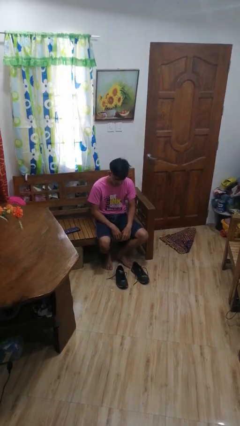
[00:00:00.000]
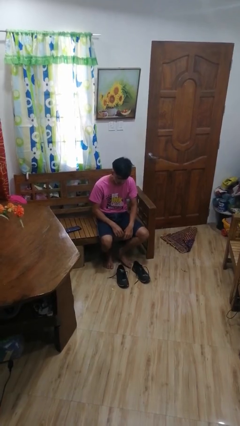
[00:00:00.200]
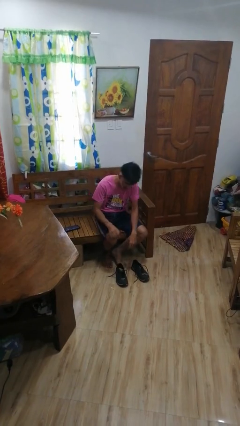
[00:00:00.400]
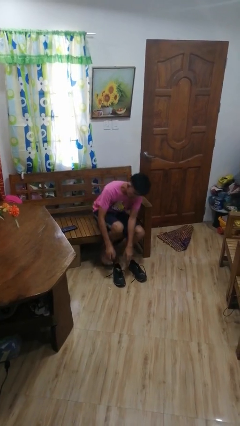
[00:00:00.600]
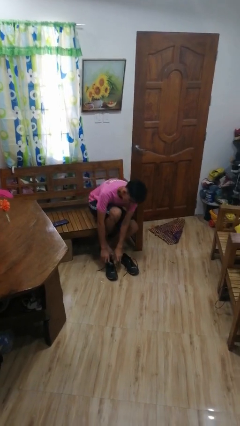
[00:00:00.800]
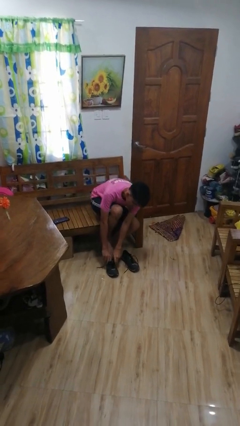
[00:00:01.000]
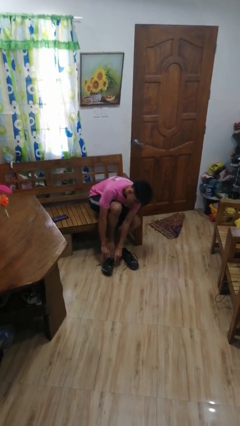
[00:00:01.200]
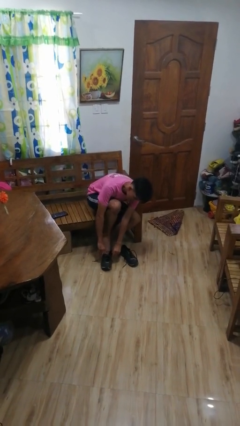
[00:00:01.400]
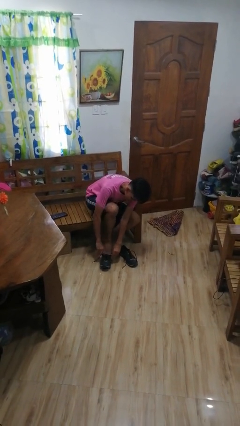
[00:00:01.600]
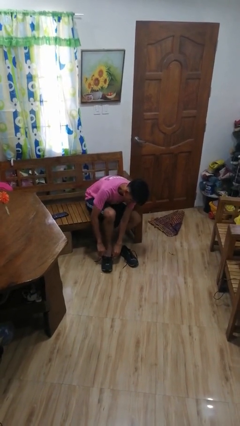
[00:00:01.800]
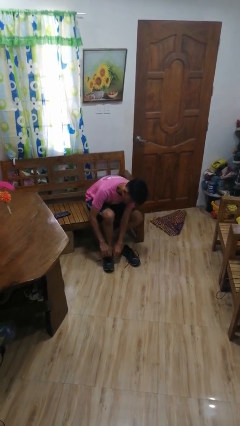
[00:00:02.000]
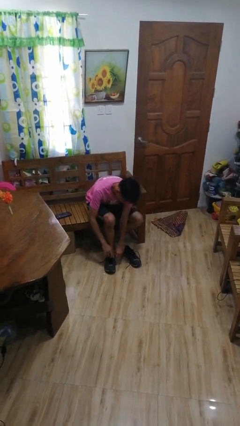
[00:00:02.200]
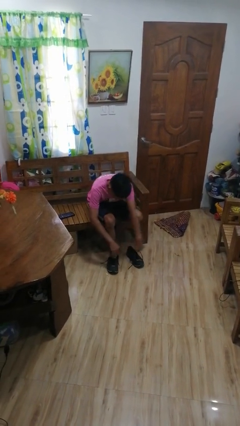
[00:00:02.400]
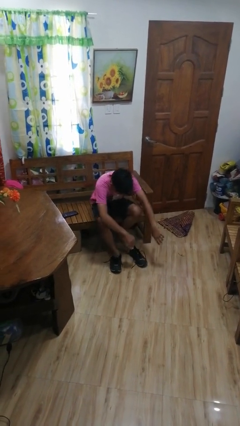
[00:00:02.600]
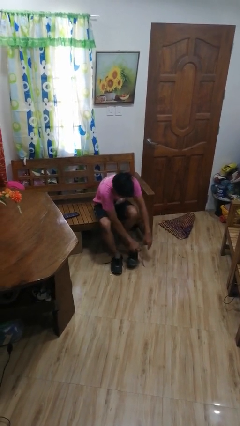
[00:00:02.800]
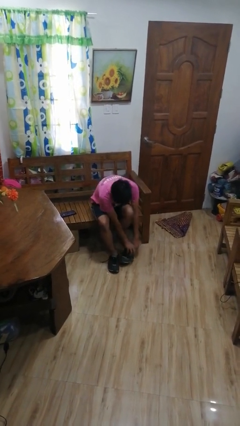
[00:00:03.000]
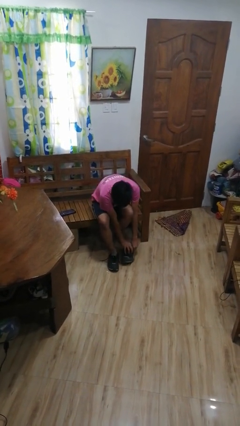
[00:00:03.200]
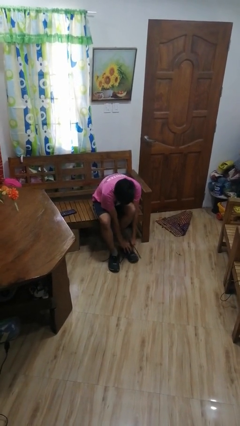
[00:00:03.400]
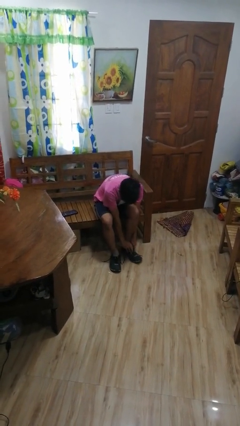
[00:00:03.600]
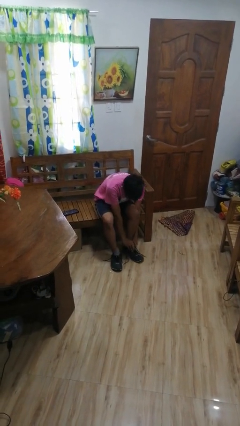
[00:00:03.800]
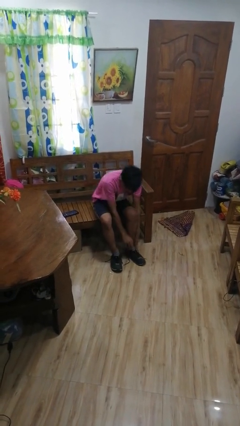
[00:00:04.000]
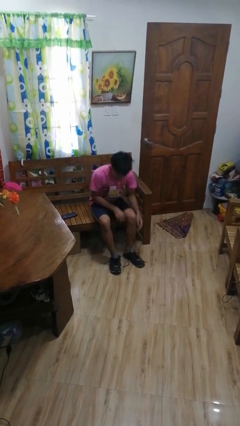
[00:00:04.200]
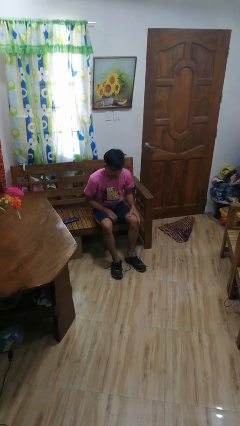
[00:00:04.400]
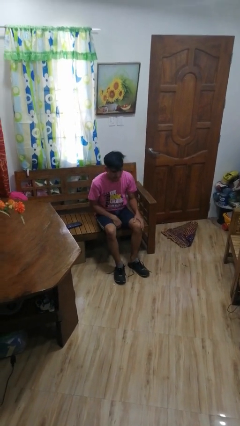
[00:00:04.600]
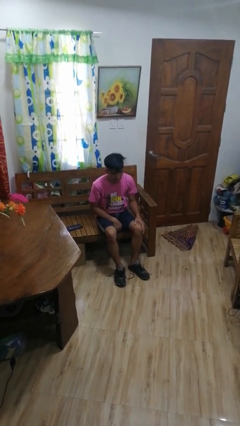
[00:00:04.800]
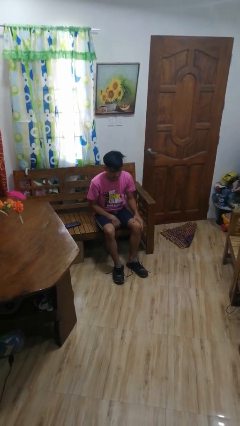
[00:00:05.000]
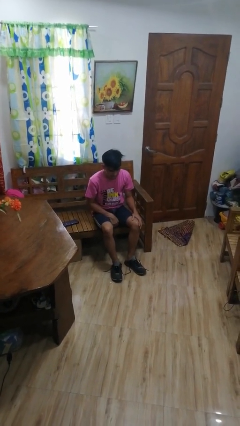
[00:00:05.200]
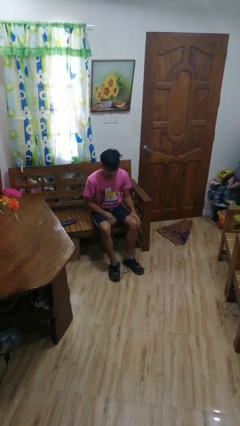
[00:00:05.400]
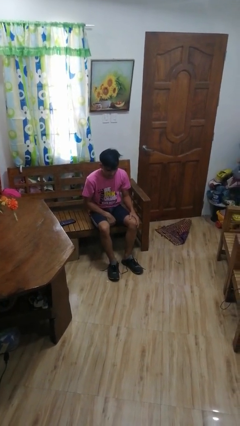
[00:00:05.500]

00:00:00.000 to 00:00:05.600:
person puts on shoes

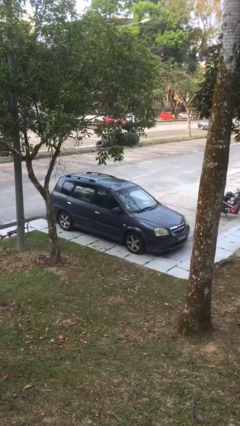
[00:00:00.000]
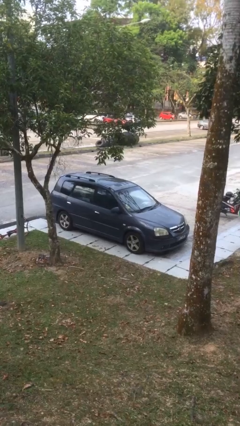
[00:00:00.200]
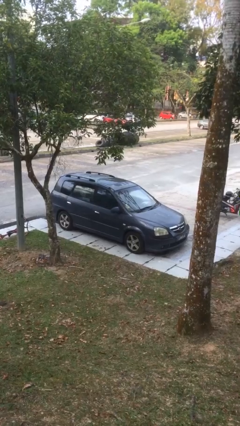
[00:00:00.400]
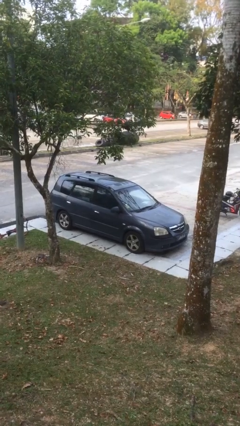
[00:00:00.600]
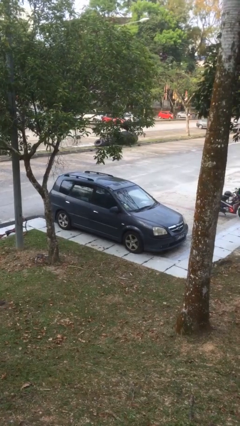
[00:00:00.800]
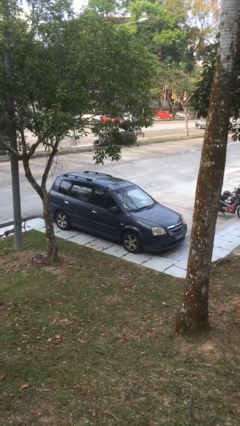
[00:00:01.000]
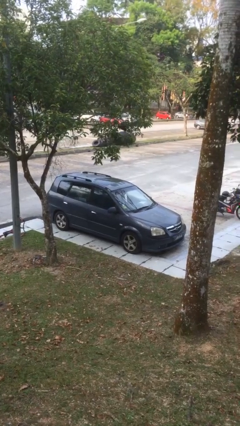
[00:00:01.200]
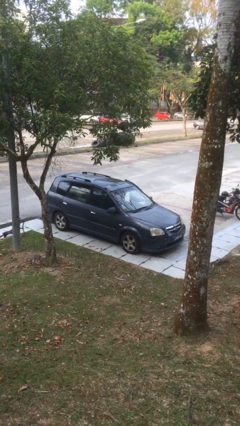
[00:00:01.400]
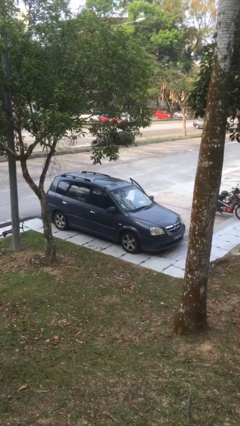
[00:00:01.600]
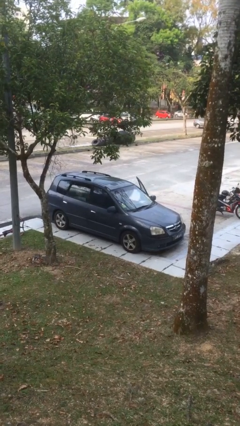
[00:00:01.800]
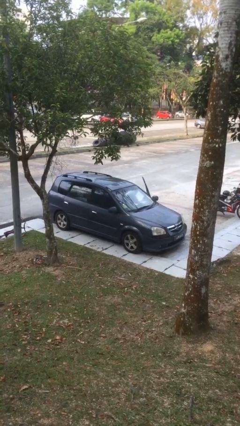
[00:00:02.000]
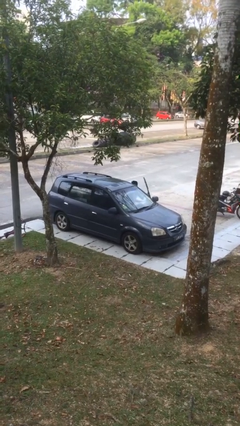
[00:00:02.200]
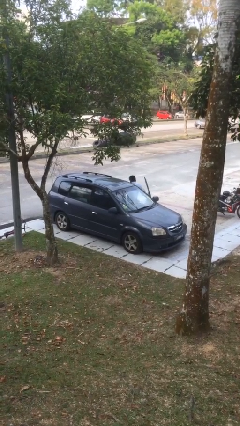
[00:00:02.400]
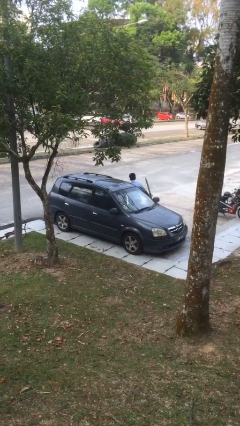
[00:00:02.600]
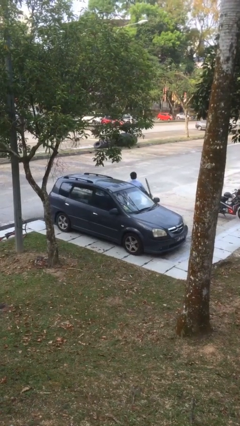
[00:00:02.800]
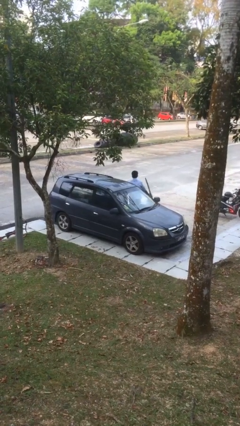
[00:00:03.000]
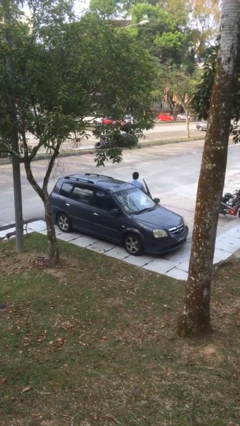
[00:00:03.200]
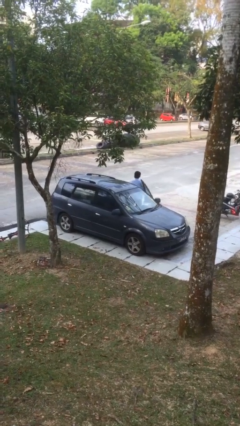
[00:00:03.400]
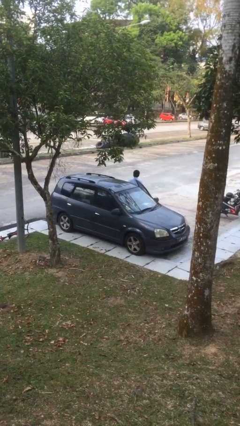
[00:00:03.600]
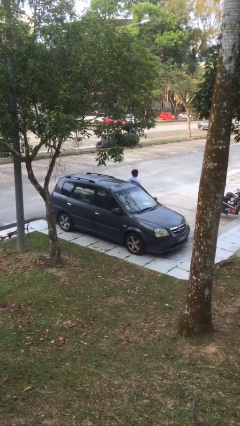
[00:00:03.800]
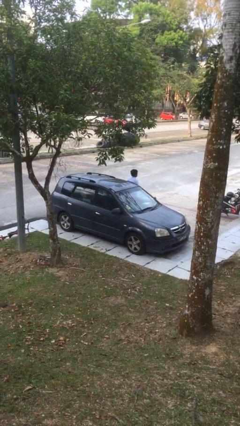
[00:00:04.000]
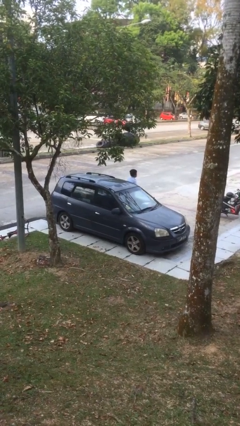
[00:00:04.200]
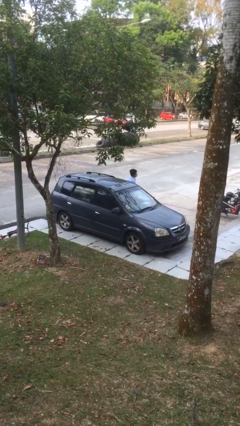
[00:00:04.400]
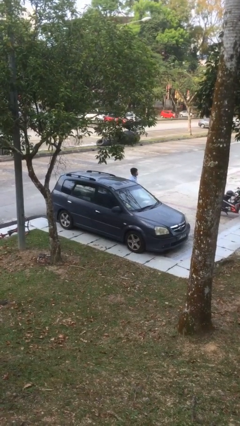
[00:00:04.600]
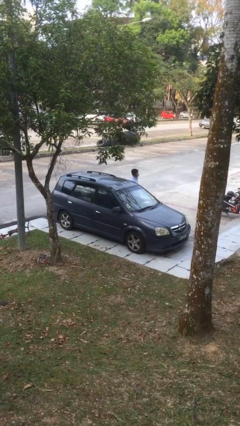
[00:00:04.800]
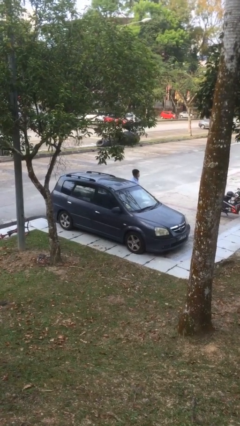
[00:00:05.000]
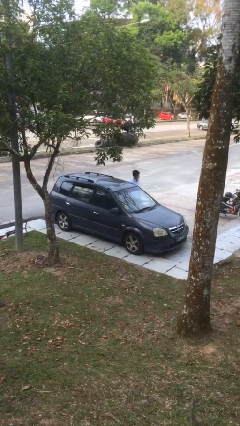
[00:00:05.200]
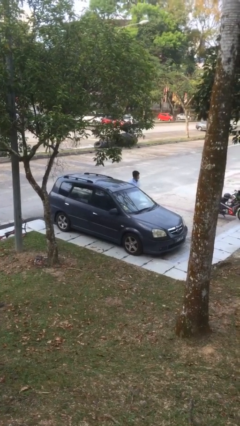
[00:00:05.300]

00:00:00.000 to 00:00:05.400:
car drops off person

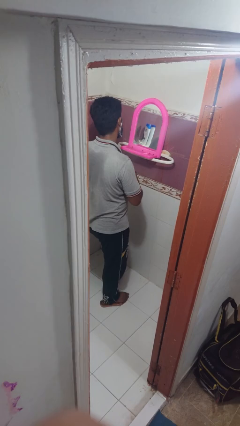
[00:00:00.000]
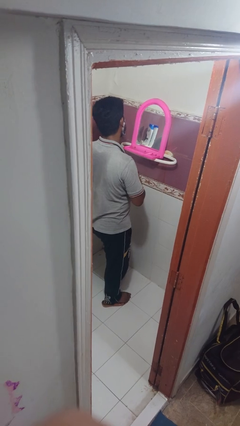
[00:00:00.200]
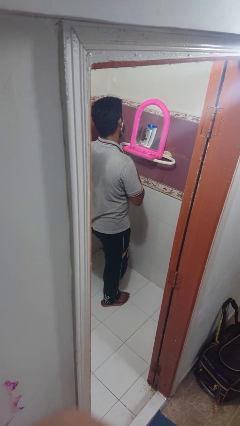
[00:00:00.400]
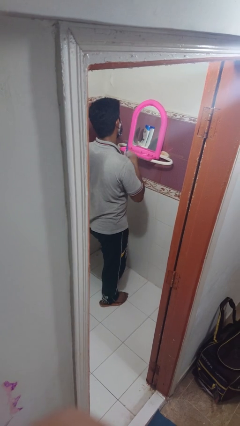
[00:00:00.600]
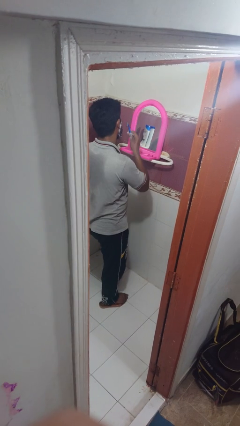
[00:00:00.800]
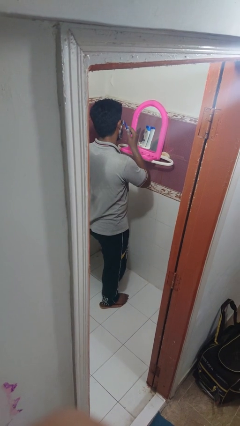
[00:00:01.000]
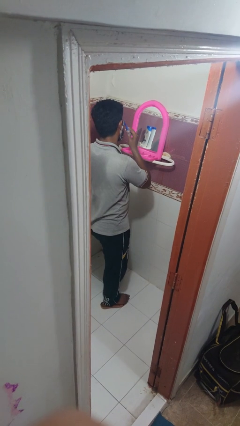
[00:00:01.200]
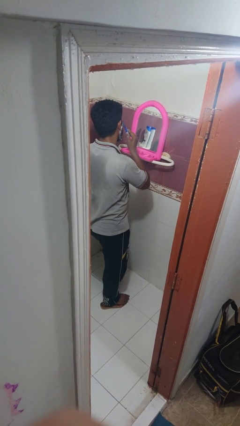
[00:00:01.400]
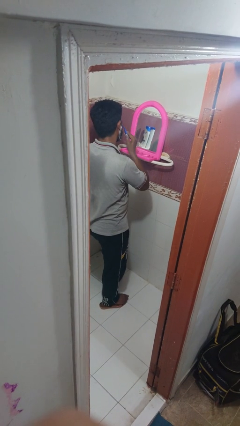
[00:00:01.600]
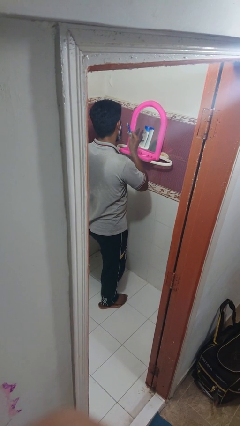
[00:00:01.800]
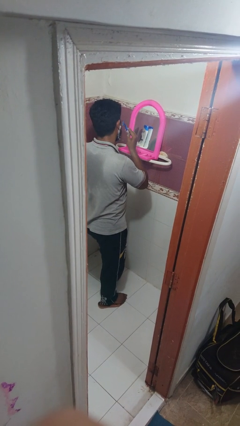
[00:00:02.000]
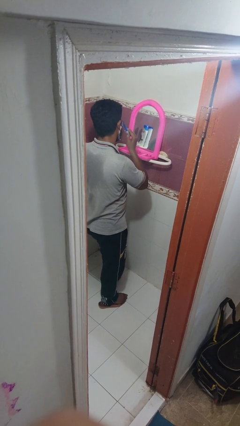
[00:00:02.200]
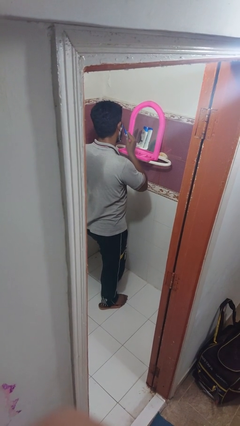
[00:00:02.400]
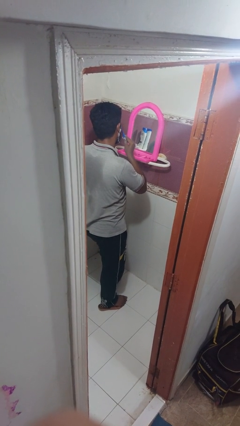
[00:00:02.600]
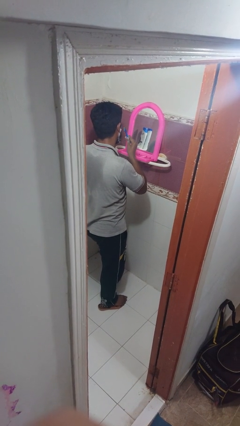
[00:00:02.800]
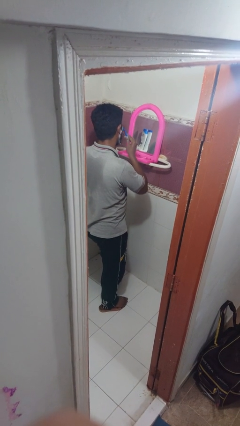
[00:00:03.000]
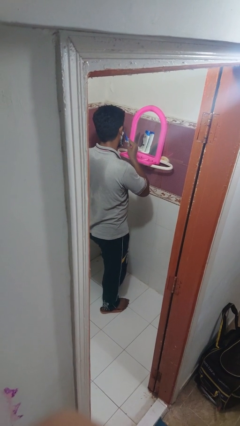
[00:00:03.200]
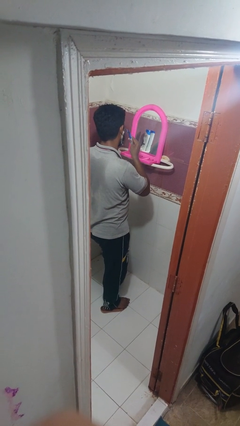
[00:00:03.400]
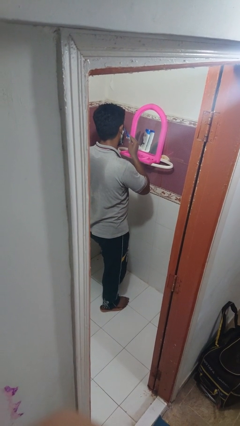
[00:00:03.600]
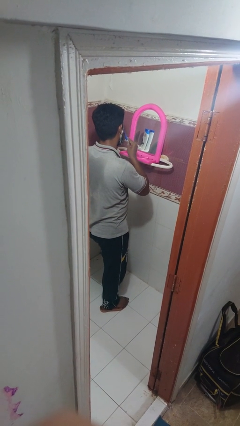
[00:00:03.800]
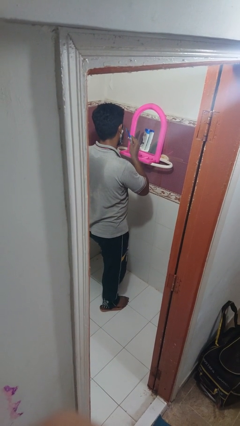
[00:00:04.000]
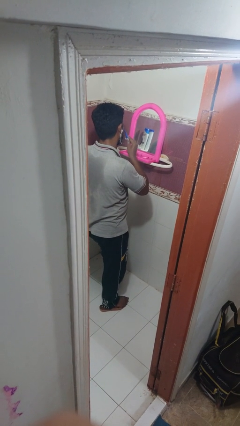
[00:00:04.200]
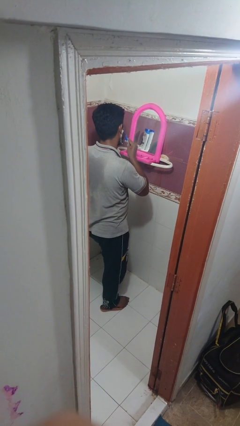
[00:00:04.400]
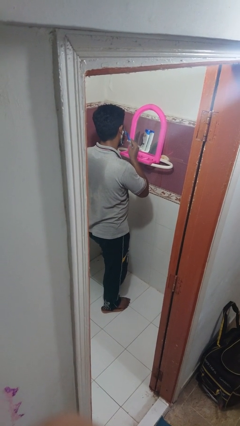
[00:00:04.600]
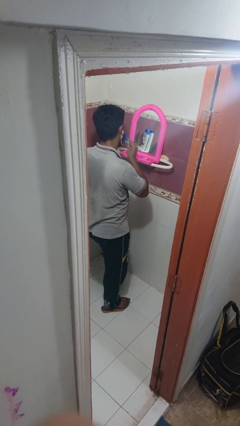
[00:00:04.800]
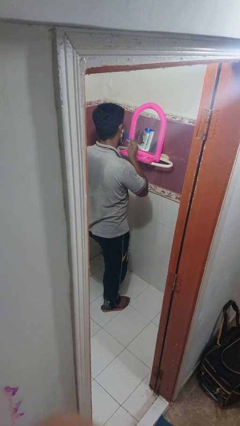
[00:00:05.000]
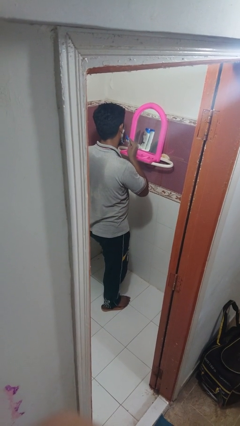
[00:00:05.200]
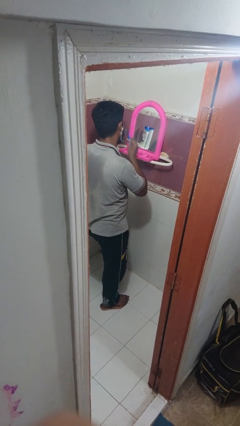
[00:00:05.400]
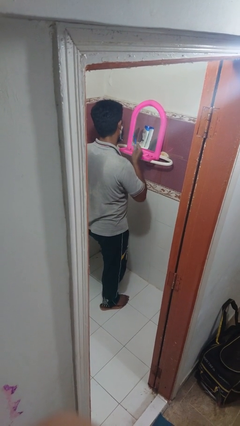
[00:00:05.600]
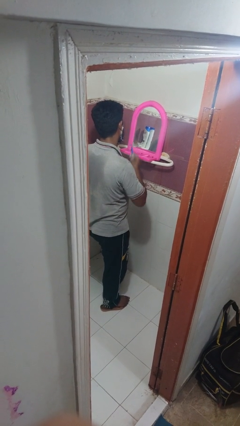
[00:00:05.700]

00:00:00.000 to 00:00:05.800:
person shaves face

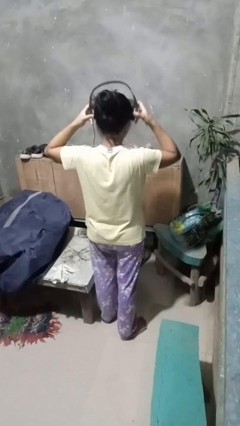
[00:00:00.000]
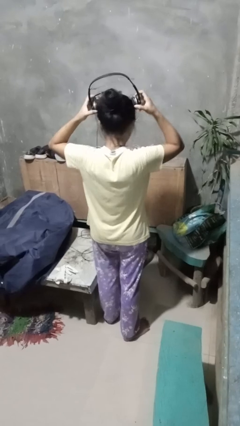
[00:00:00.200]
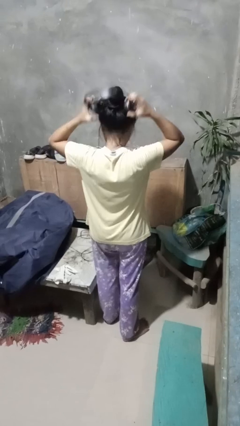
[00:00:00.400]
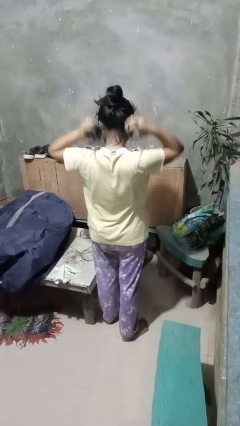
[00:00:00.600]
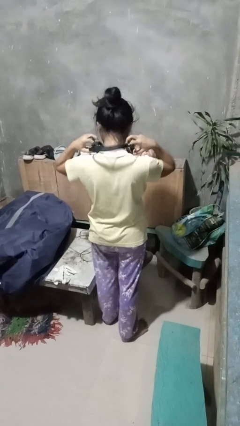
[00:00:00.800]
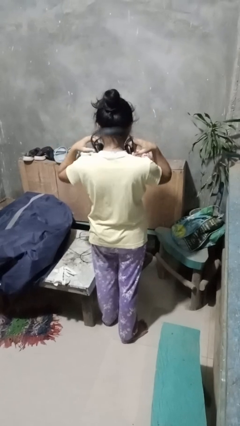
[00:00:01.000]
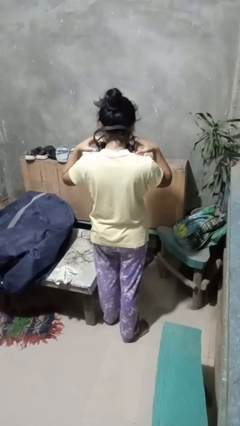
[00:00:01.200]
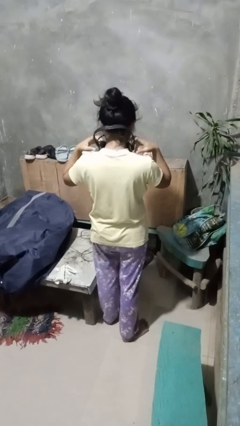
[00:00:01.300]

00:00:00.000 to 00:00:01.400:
person takes off headphones
